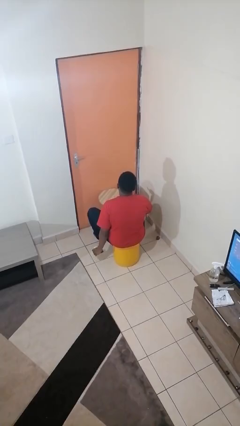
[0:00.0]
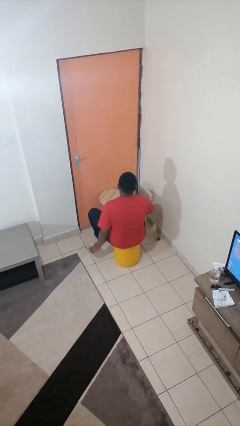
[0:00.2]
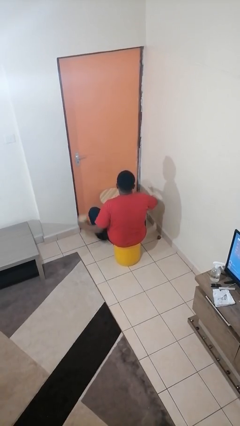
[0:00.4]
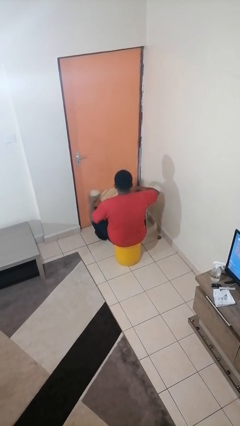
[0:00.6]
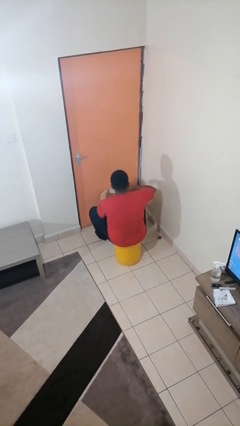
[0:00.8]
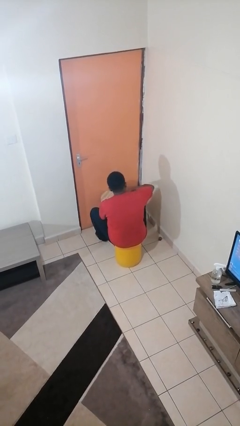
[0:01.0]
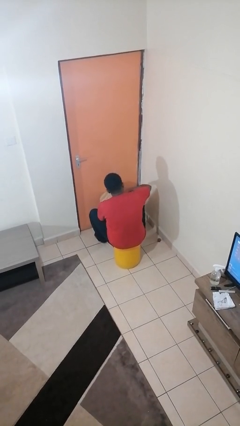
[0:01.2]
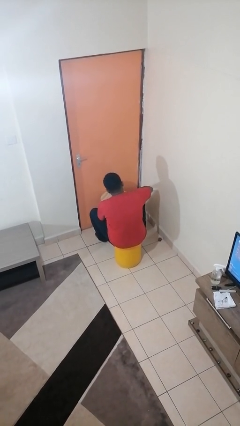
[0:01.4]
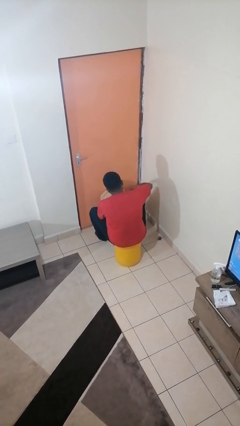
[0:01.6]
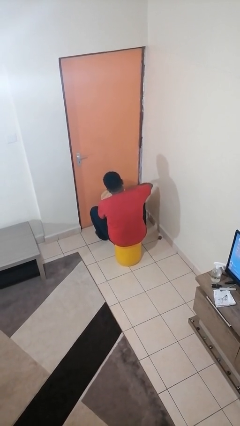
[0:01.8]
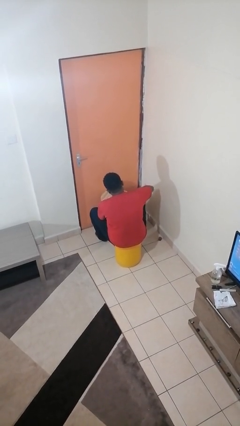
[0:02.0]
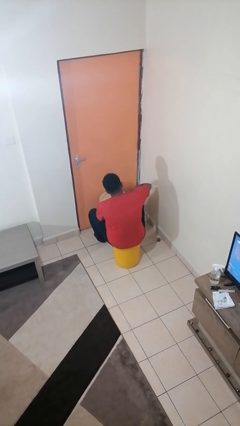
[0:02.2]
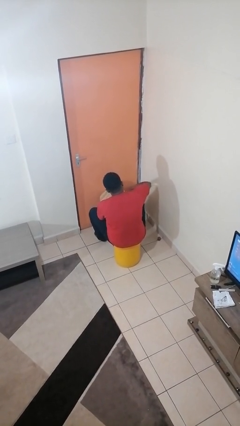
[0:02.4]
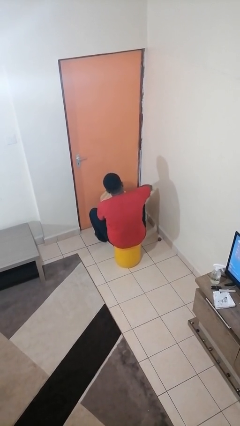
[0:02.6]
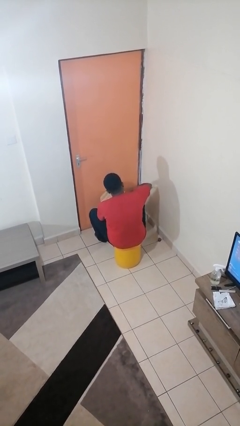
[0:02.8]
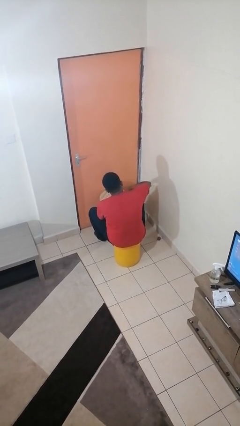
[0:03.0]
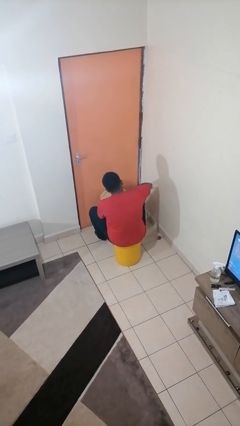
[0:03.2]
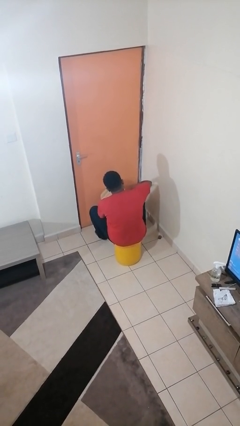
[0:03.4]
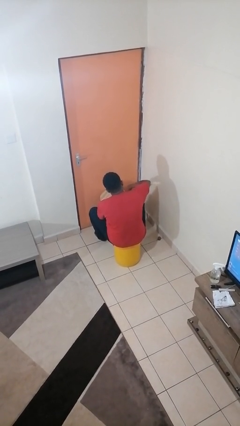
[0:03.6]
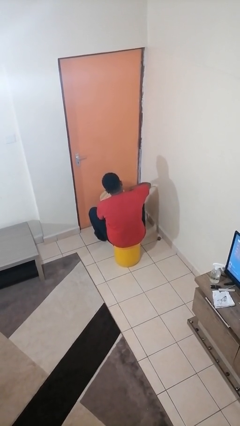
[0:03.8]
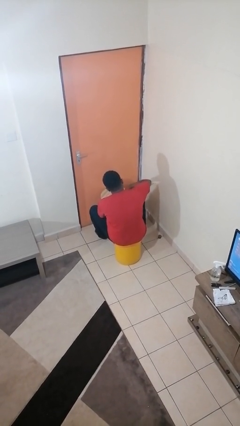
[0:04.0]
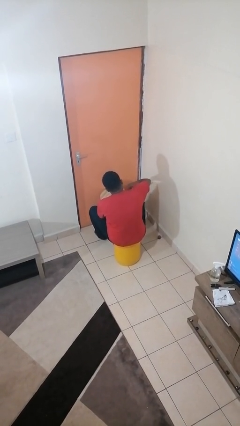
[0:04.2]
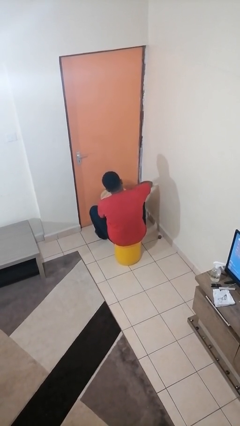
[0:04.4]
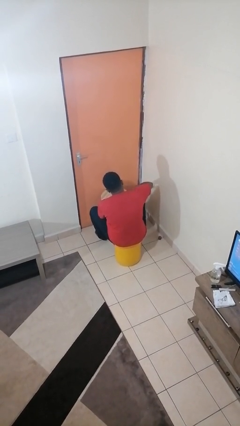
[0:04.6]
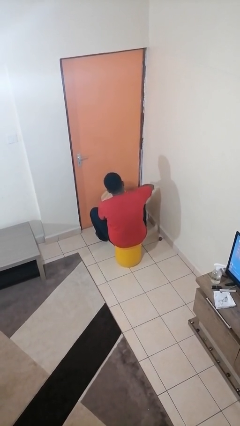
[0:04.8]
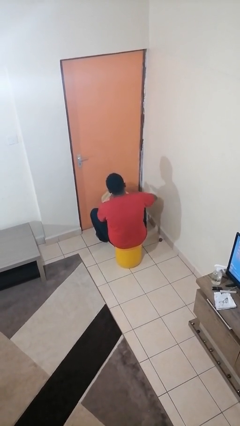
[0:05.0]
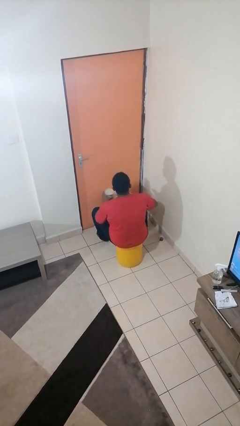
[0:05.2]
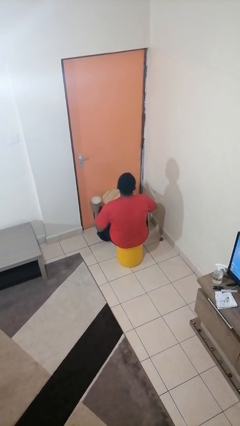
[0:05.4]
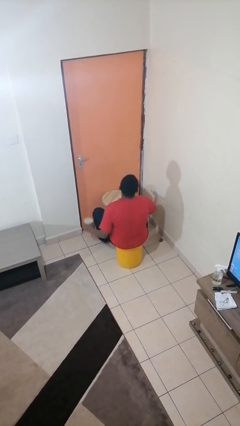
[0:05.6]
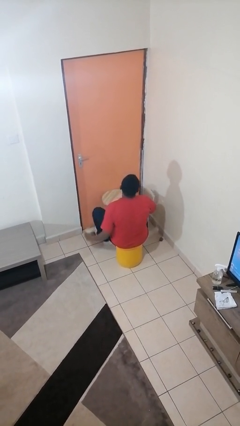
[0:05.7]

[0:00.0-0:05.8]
person opens can with can opener

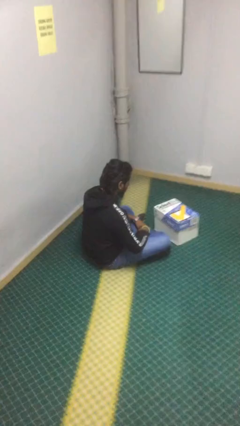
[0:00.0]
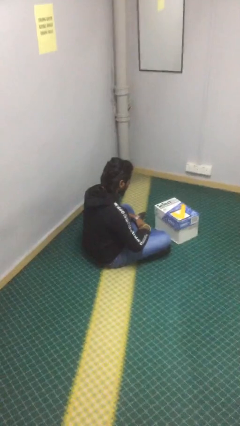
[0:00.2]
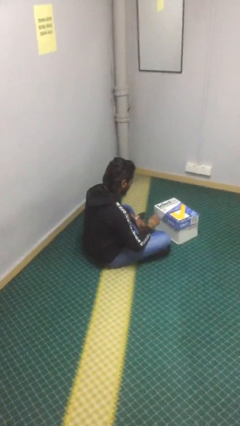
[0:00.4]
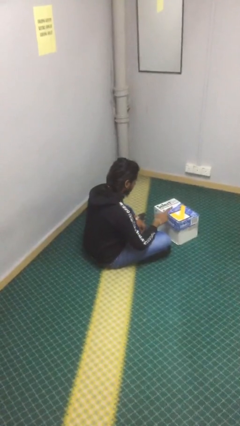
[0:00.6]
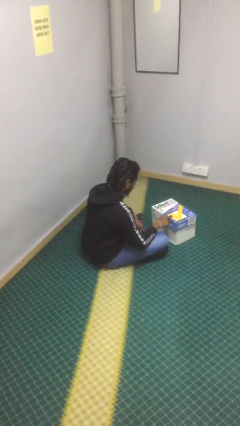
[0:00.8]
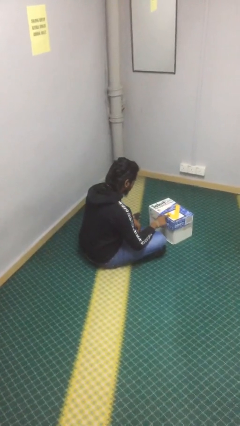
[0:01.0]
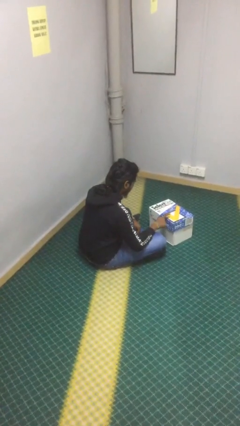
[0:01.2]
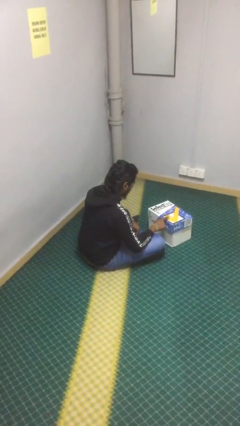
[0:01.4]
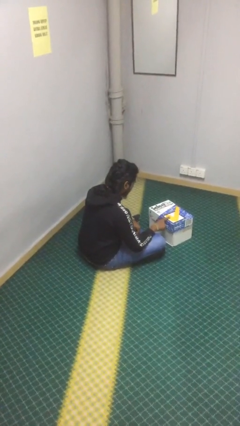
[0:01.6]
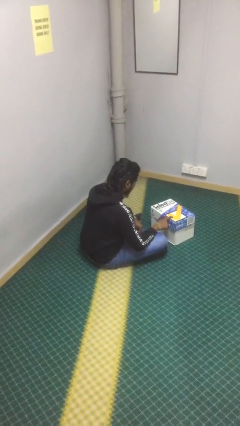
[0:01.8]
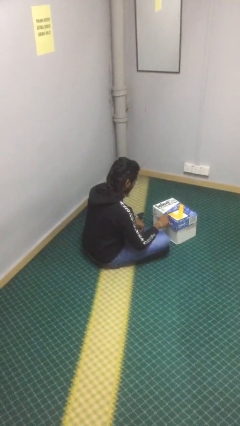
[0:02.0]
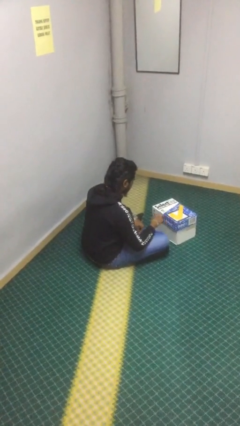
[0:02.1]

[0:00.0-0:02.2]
person taps object with finger

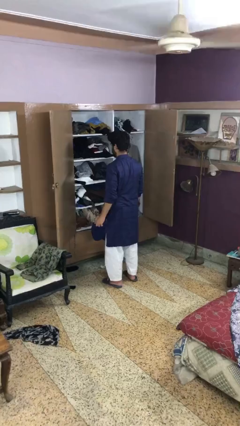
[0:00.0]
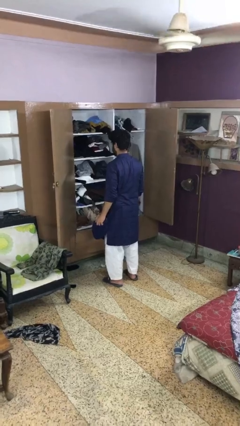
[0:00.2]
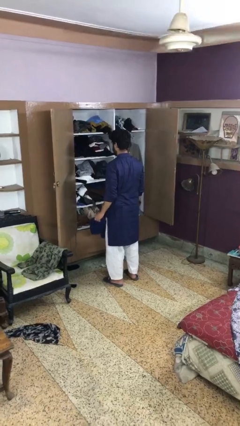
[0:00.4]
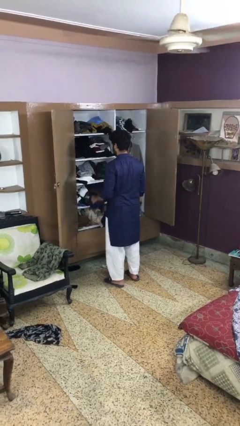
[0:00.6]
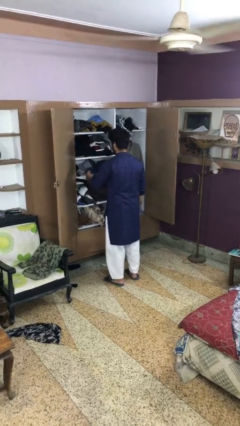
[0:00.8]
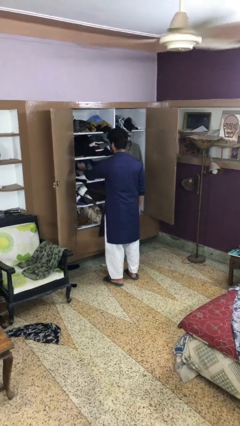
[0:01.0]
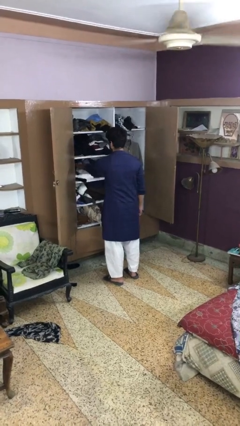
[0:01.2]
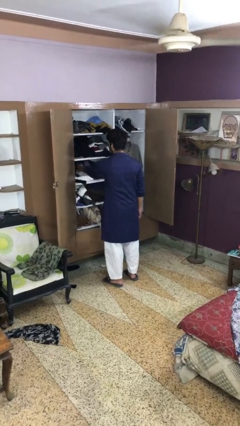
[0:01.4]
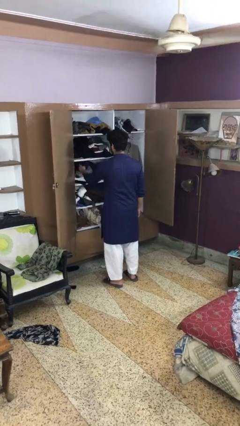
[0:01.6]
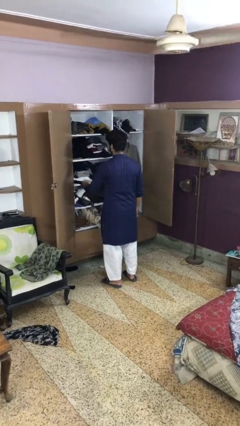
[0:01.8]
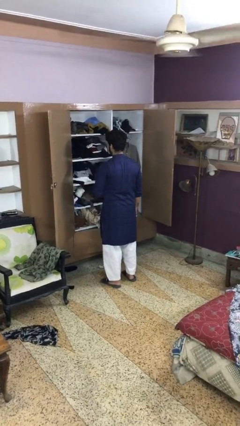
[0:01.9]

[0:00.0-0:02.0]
person puts clothes into dresser

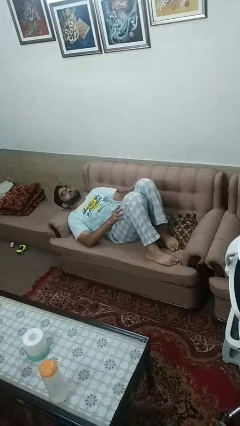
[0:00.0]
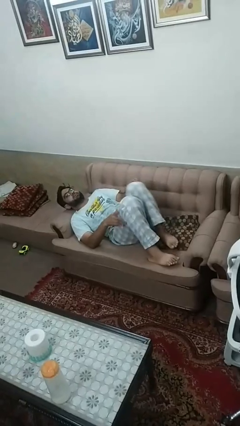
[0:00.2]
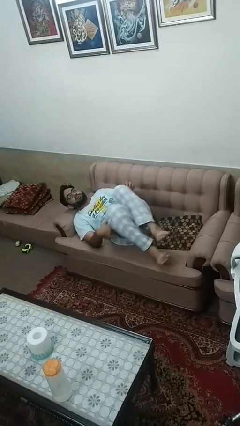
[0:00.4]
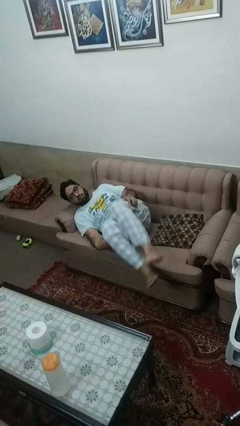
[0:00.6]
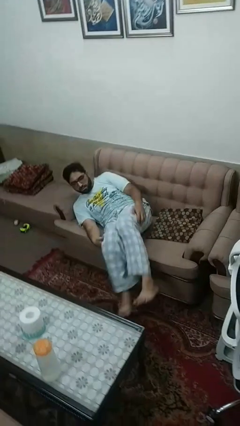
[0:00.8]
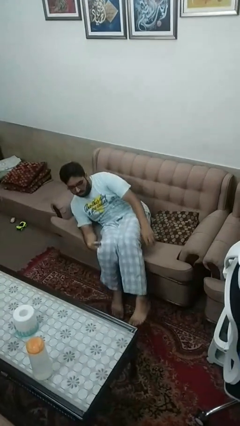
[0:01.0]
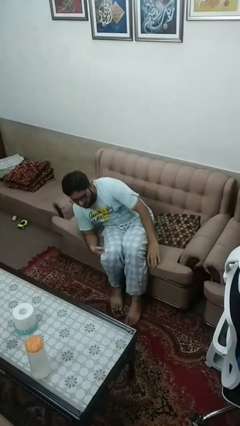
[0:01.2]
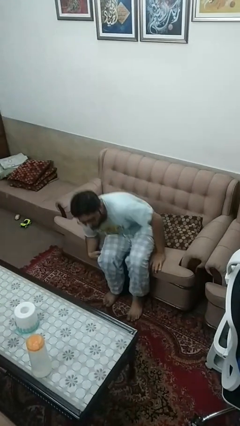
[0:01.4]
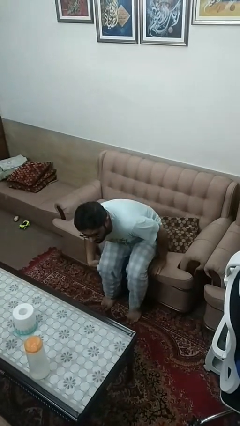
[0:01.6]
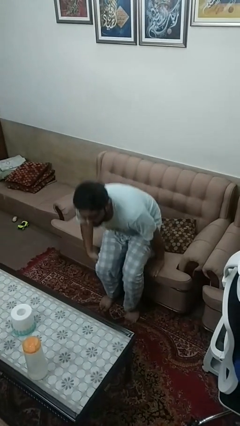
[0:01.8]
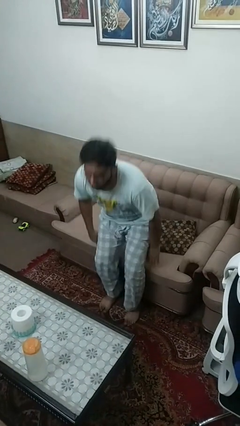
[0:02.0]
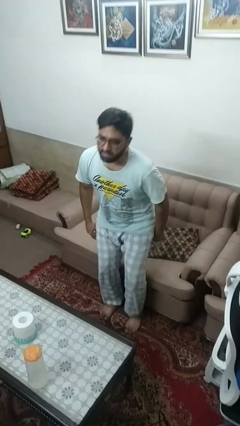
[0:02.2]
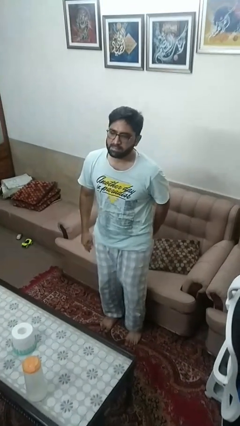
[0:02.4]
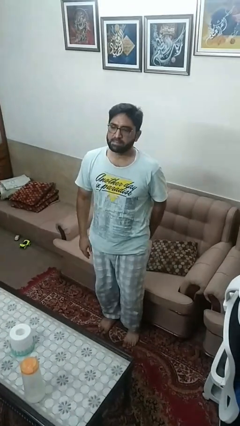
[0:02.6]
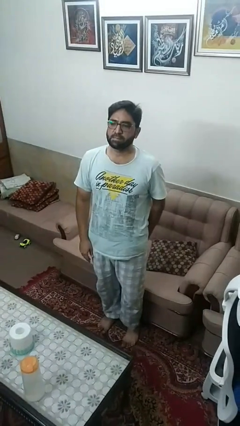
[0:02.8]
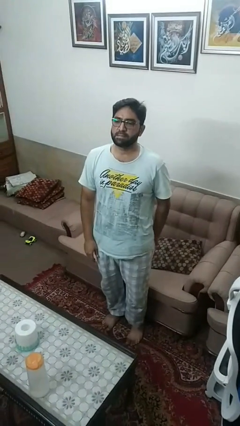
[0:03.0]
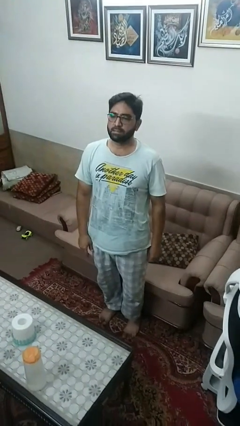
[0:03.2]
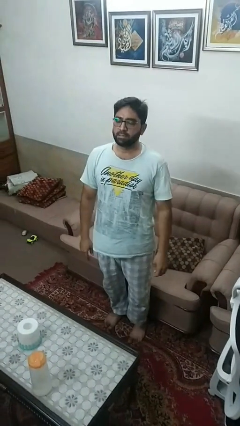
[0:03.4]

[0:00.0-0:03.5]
person stands up

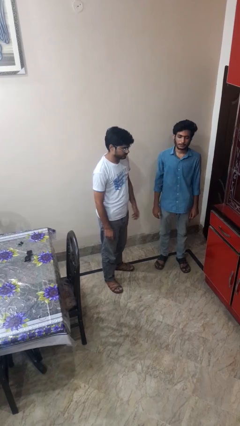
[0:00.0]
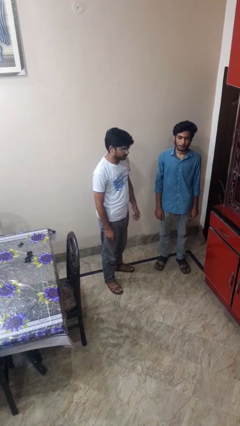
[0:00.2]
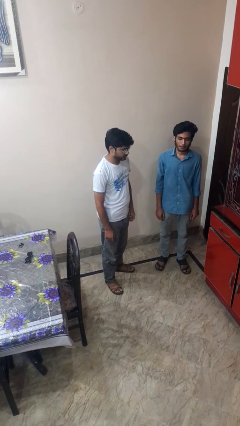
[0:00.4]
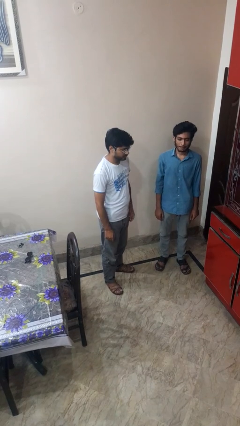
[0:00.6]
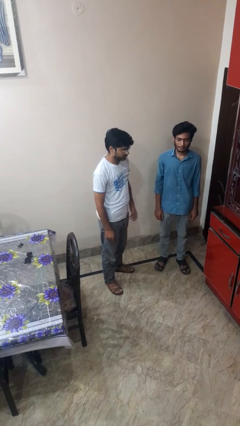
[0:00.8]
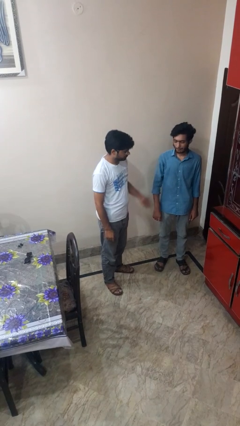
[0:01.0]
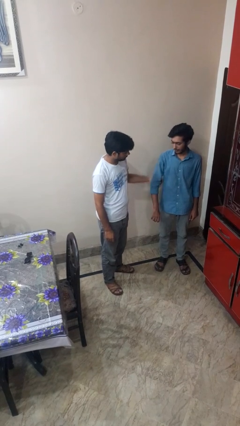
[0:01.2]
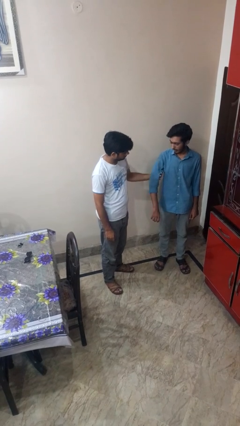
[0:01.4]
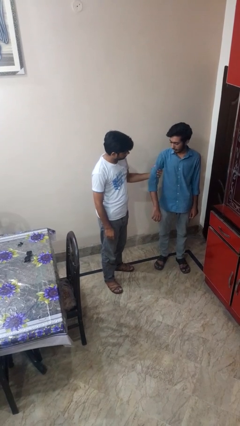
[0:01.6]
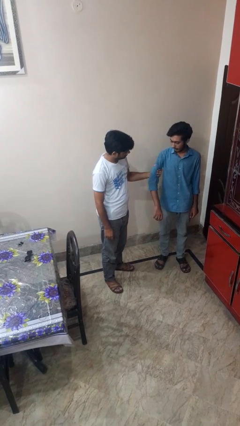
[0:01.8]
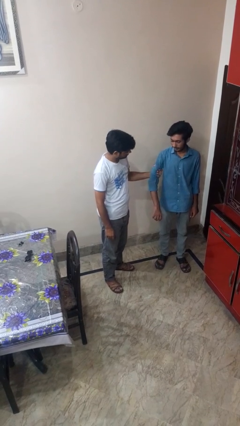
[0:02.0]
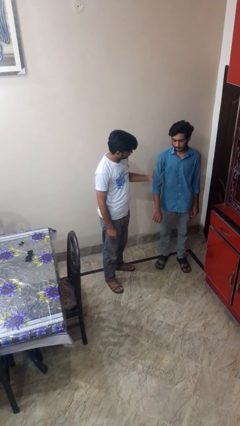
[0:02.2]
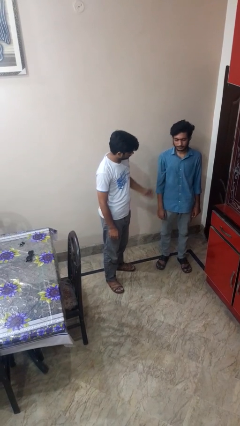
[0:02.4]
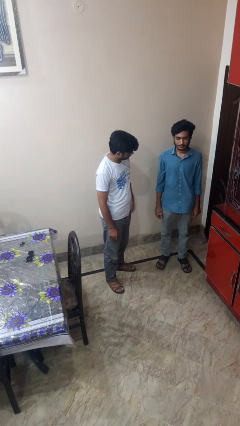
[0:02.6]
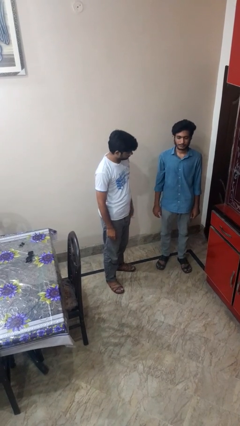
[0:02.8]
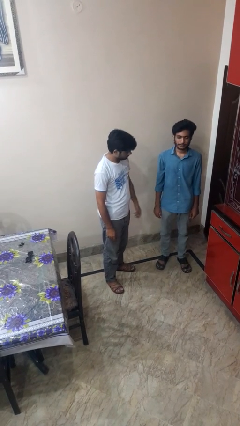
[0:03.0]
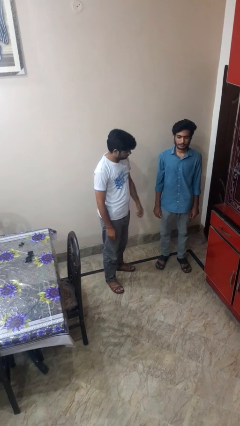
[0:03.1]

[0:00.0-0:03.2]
person searches in backpack

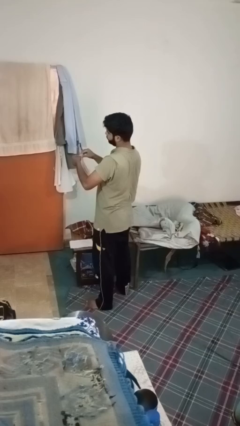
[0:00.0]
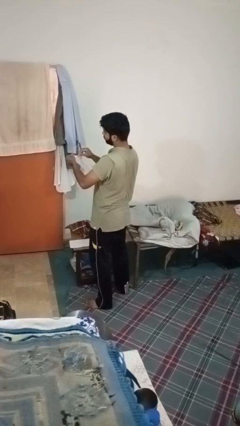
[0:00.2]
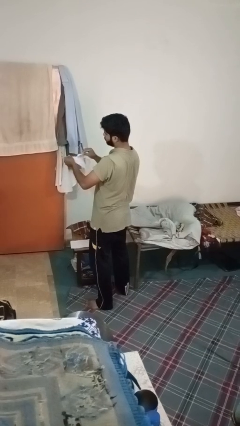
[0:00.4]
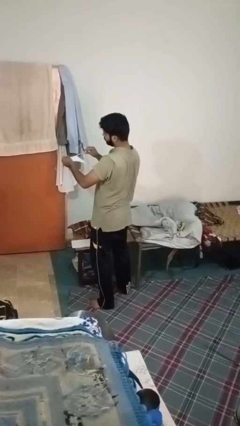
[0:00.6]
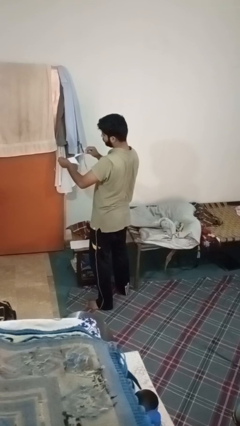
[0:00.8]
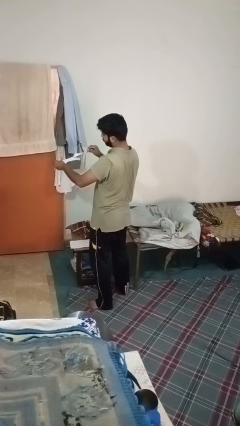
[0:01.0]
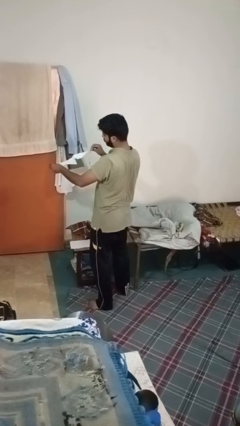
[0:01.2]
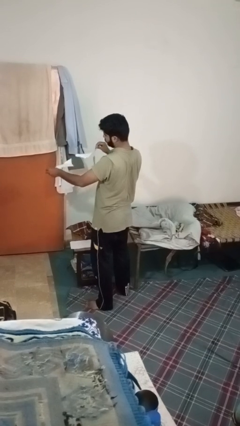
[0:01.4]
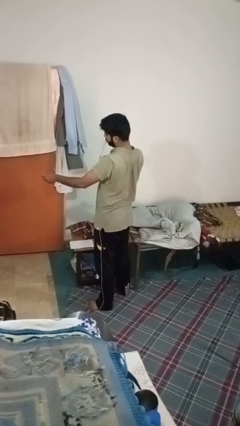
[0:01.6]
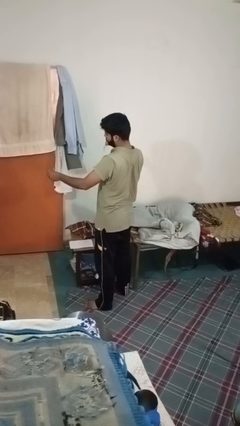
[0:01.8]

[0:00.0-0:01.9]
person tears paper
